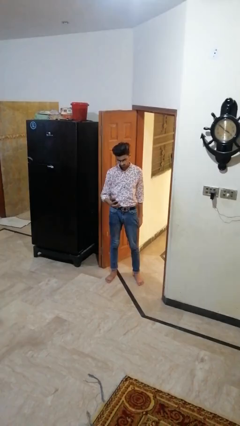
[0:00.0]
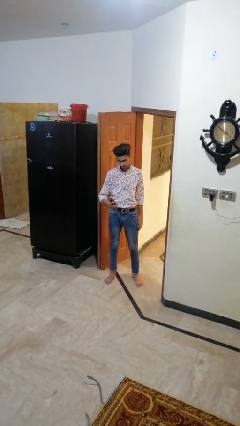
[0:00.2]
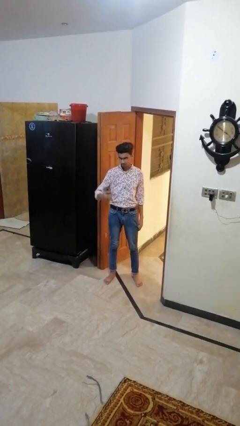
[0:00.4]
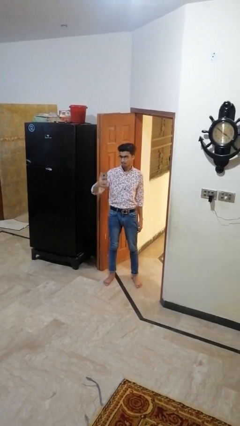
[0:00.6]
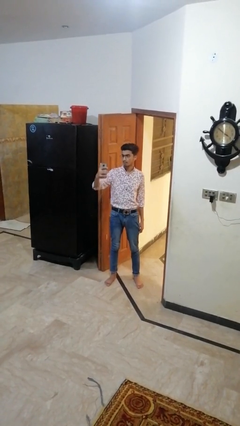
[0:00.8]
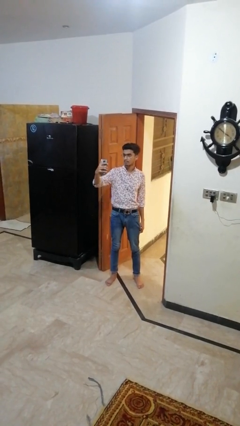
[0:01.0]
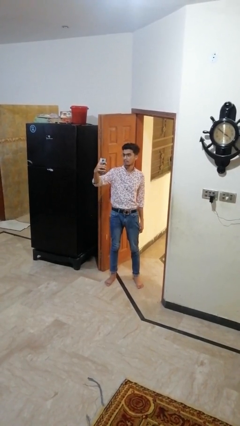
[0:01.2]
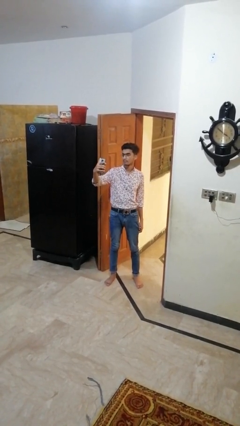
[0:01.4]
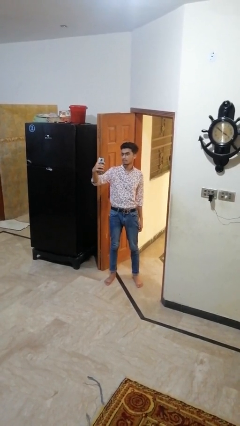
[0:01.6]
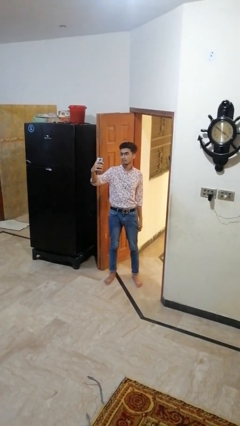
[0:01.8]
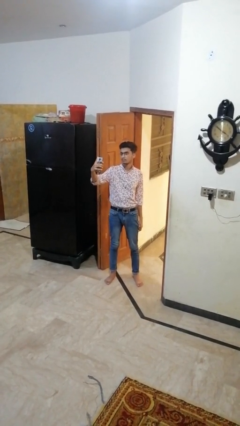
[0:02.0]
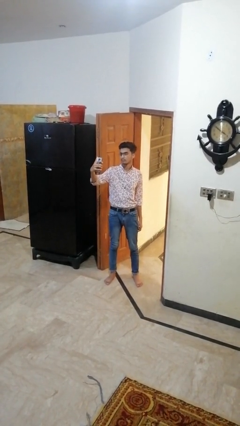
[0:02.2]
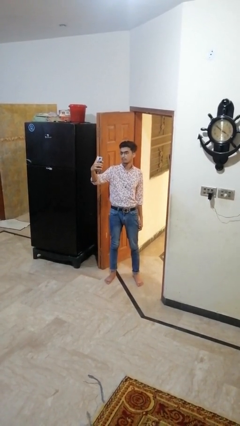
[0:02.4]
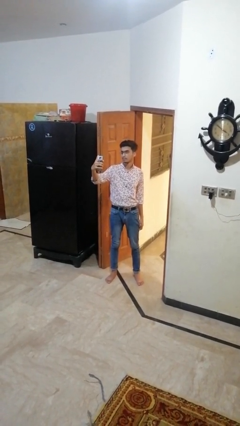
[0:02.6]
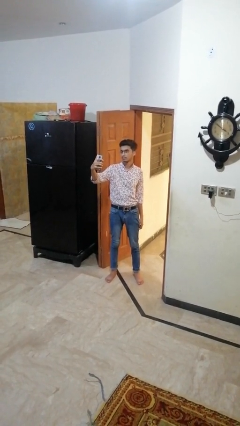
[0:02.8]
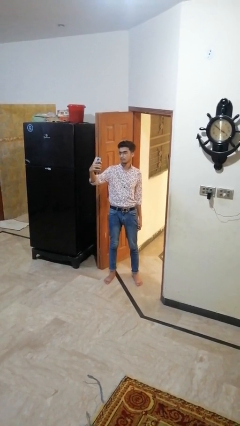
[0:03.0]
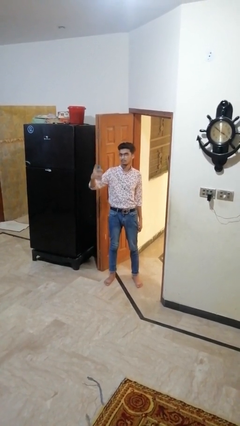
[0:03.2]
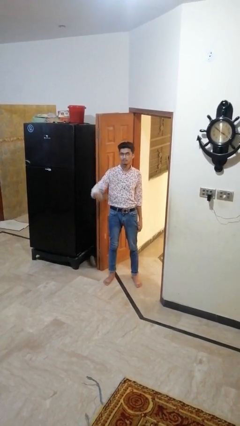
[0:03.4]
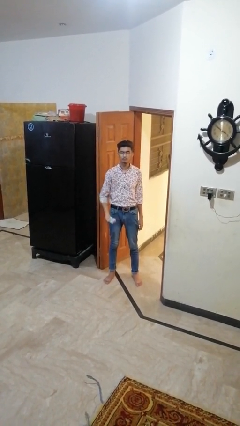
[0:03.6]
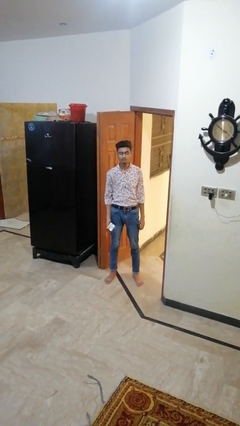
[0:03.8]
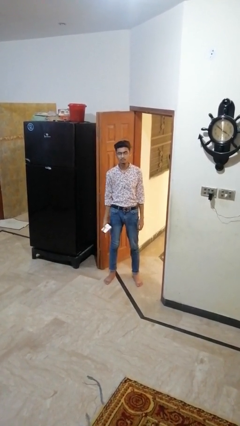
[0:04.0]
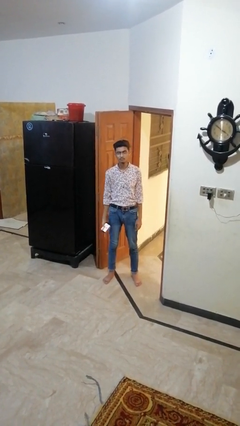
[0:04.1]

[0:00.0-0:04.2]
person takes selfie

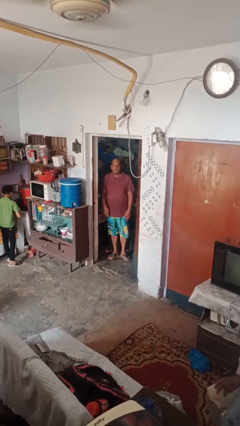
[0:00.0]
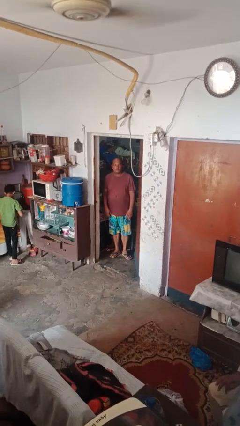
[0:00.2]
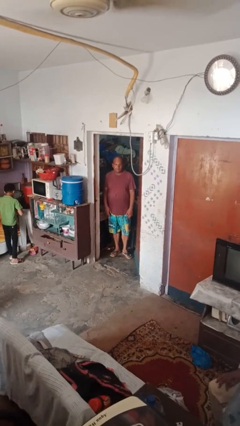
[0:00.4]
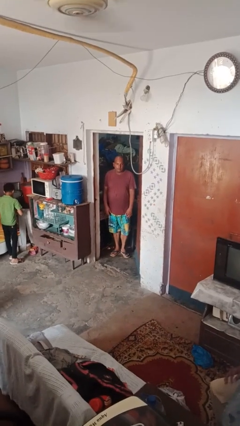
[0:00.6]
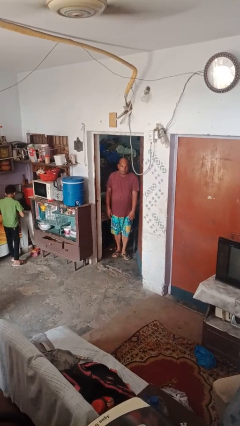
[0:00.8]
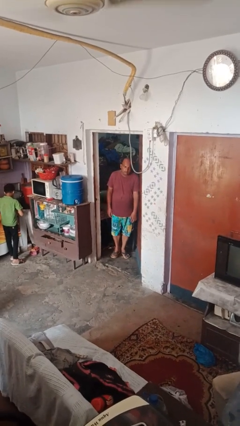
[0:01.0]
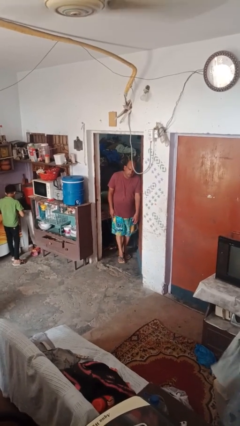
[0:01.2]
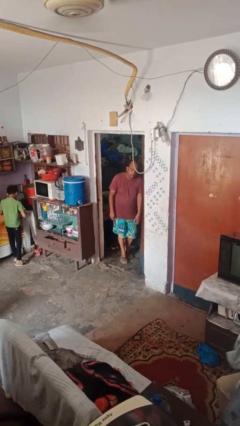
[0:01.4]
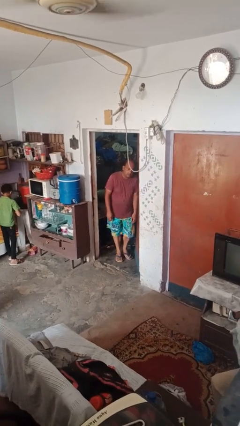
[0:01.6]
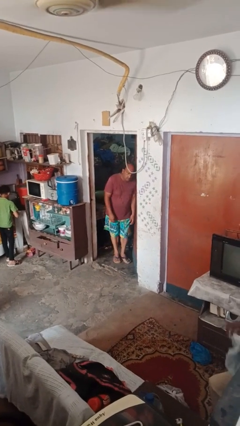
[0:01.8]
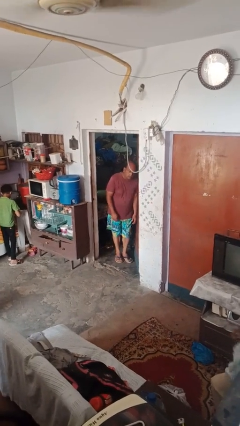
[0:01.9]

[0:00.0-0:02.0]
person bumps into wall

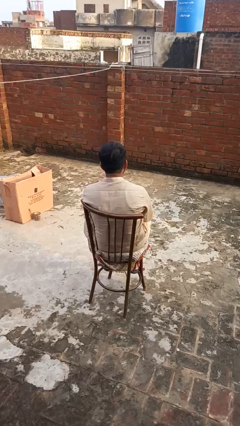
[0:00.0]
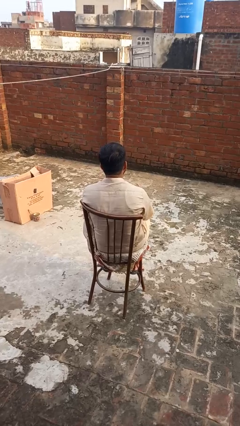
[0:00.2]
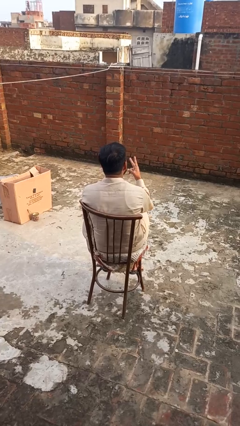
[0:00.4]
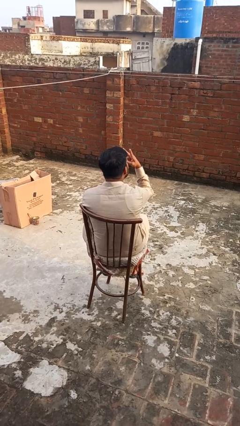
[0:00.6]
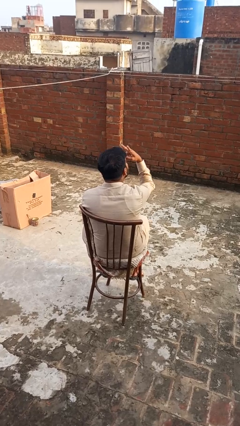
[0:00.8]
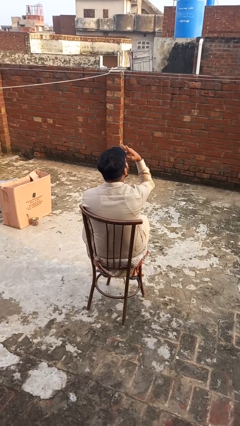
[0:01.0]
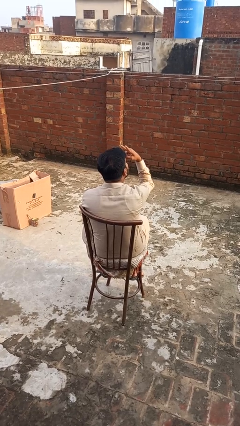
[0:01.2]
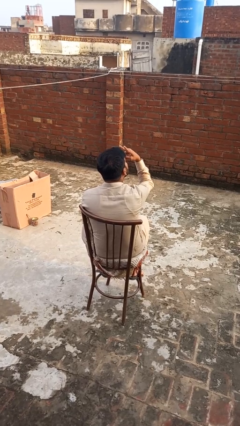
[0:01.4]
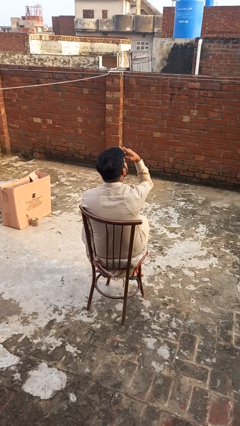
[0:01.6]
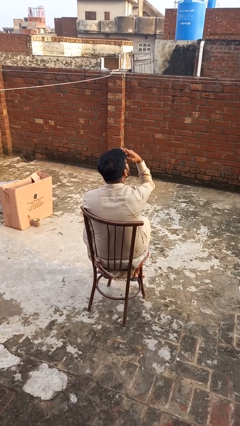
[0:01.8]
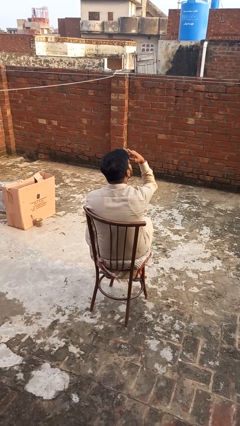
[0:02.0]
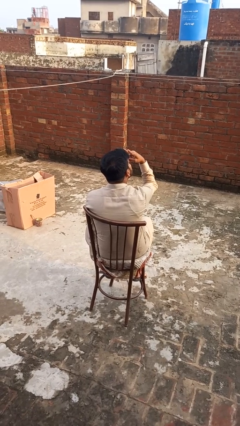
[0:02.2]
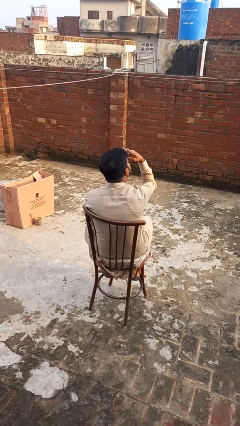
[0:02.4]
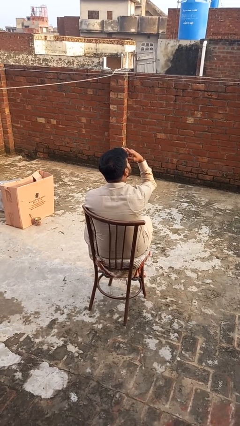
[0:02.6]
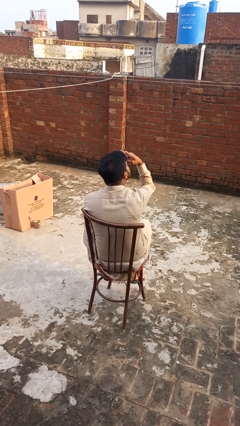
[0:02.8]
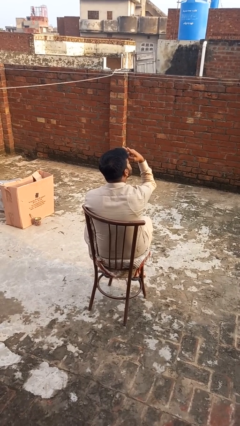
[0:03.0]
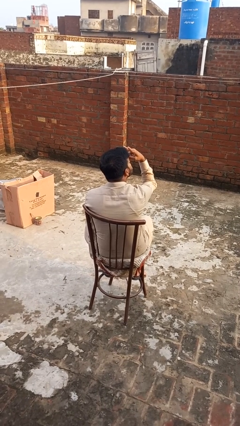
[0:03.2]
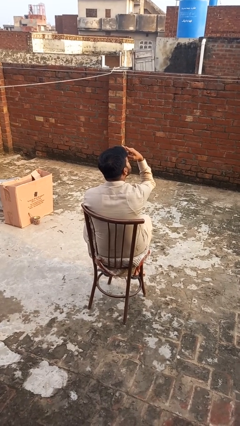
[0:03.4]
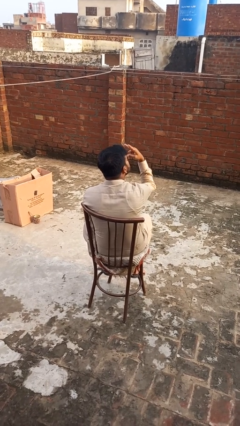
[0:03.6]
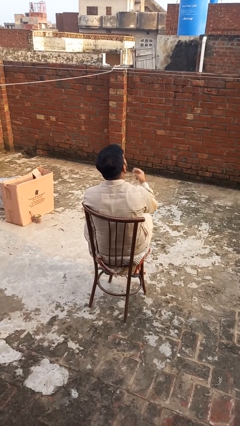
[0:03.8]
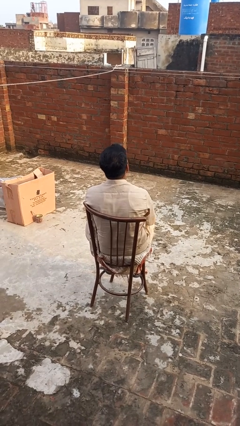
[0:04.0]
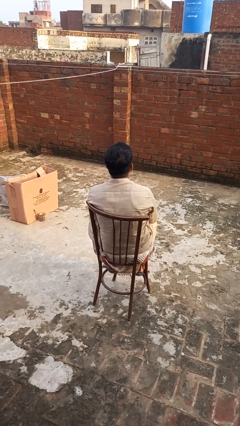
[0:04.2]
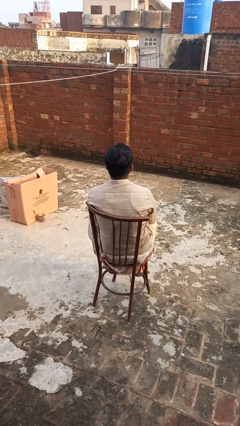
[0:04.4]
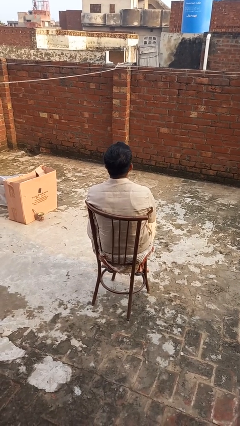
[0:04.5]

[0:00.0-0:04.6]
person gestures watch closely

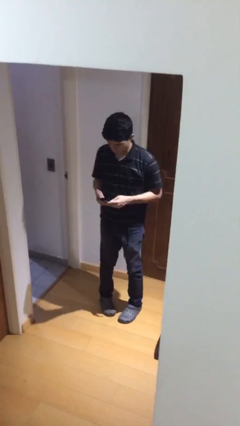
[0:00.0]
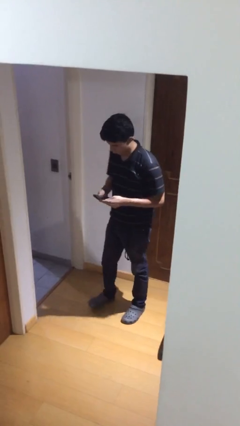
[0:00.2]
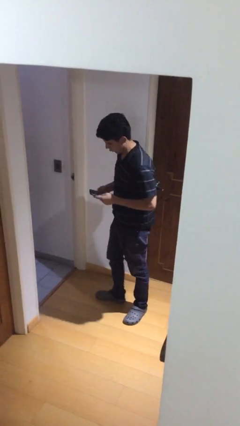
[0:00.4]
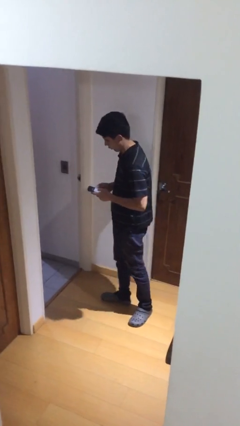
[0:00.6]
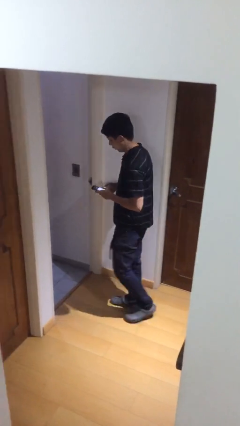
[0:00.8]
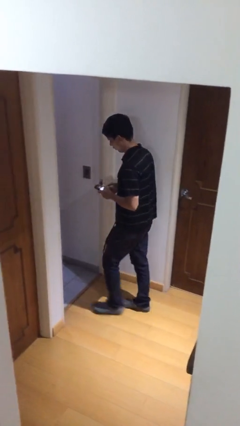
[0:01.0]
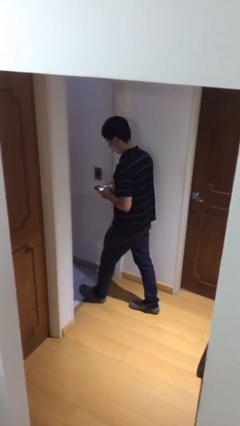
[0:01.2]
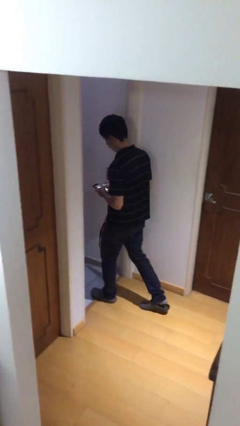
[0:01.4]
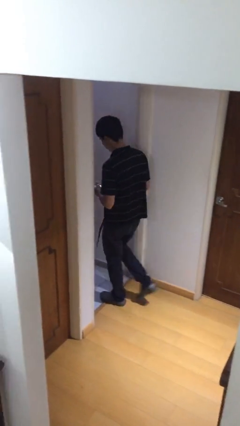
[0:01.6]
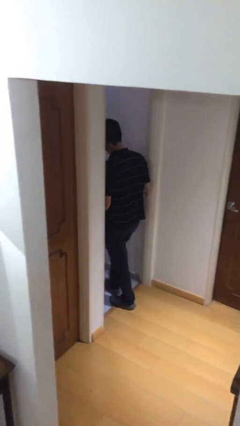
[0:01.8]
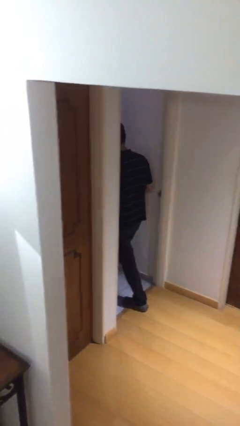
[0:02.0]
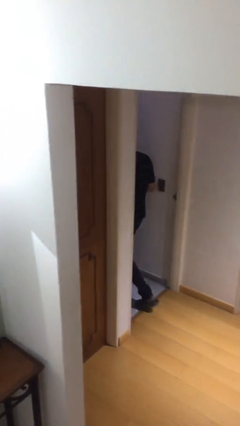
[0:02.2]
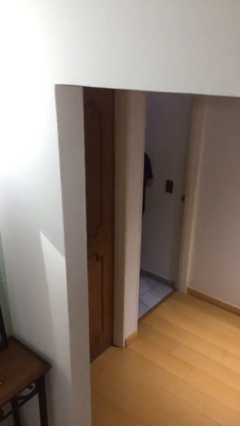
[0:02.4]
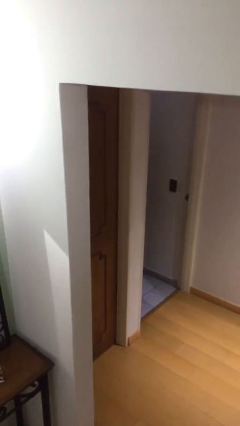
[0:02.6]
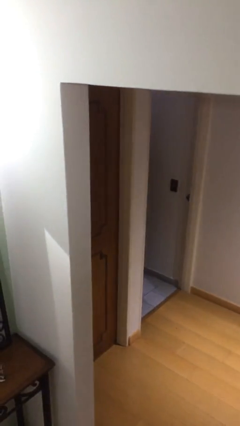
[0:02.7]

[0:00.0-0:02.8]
person exits scene through structure

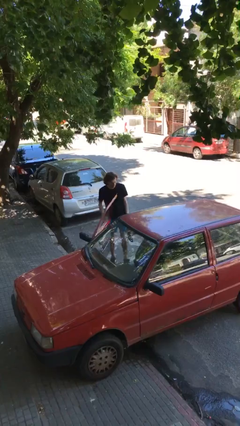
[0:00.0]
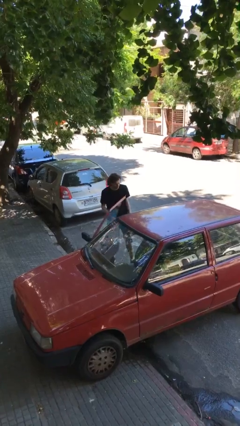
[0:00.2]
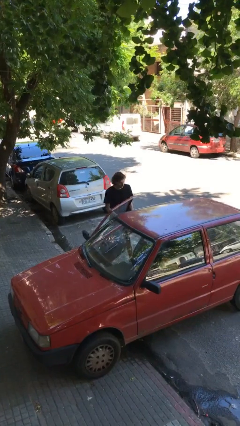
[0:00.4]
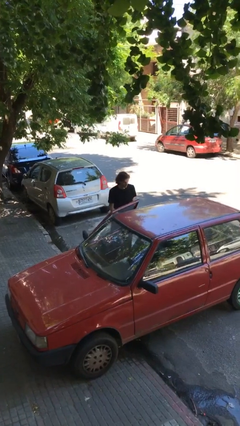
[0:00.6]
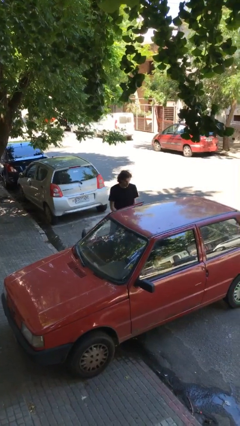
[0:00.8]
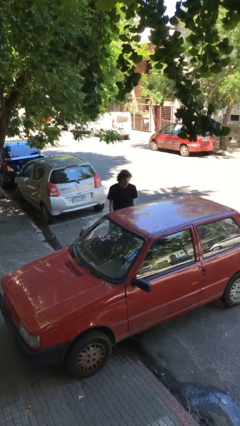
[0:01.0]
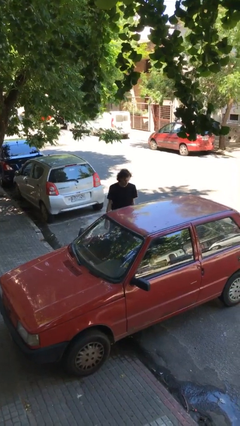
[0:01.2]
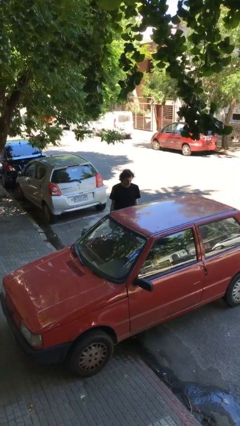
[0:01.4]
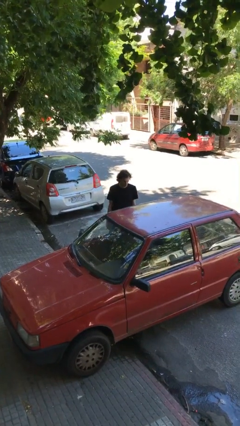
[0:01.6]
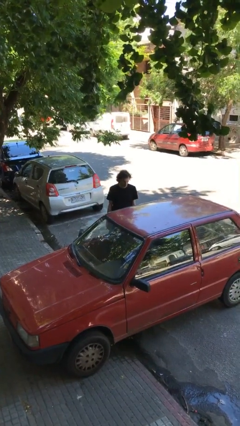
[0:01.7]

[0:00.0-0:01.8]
person closes car door

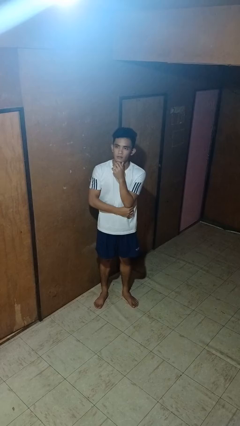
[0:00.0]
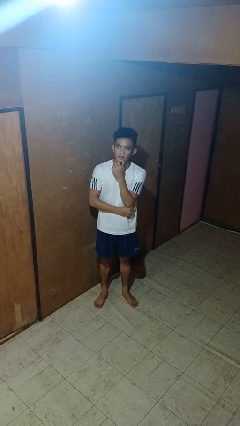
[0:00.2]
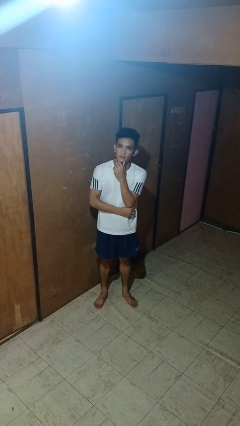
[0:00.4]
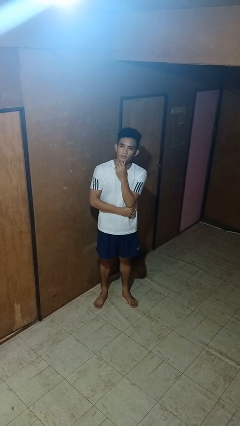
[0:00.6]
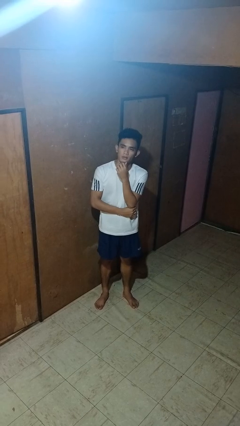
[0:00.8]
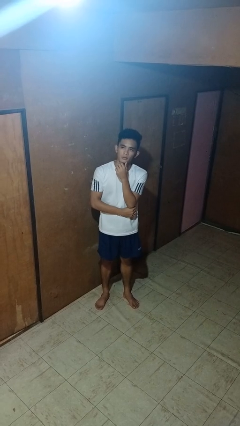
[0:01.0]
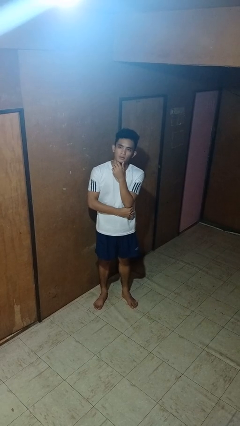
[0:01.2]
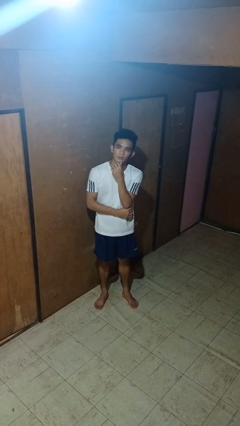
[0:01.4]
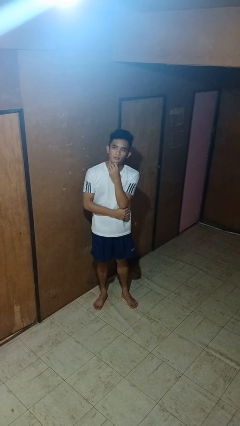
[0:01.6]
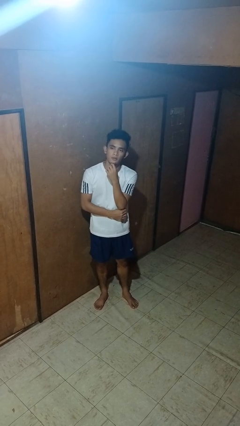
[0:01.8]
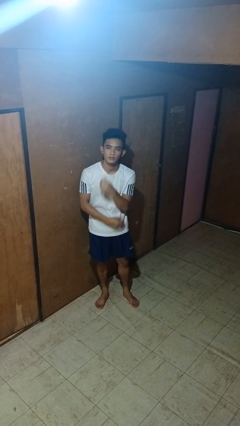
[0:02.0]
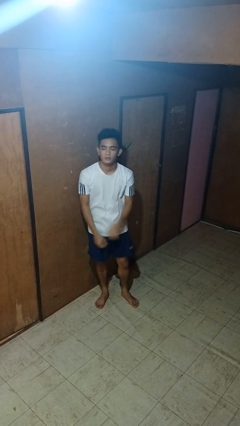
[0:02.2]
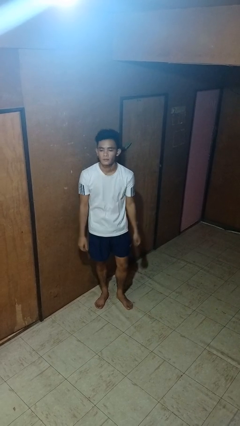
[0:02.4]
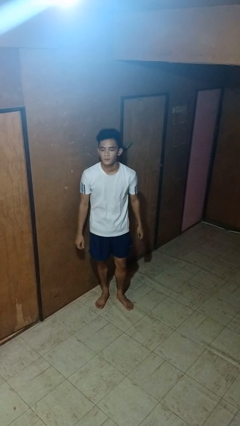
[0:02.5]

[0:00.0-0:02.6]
person strokes chin
